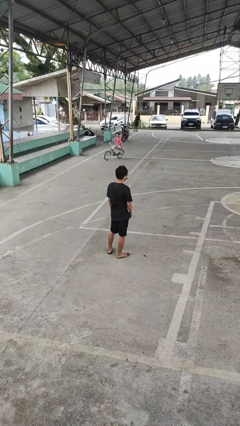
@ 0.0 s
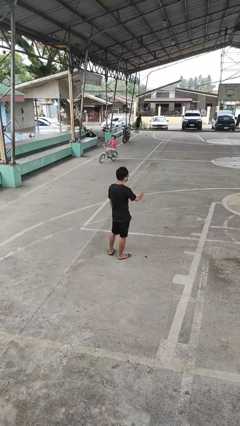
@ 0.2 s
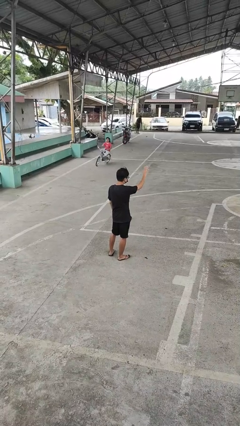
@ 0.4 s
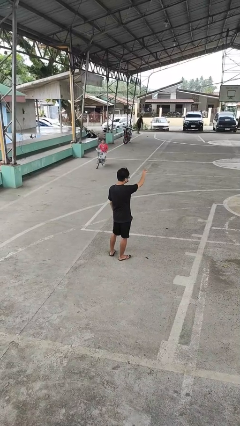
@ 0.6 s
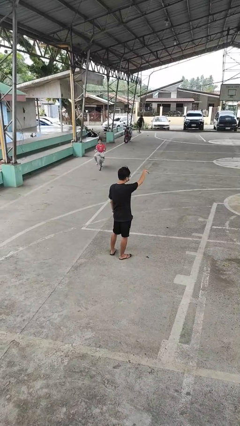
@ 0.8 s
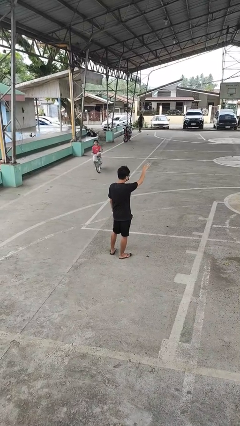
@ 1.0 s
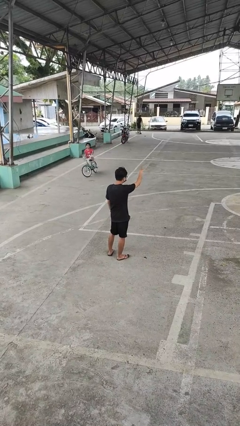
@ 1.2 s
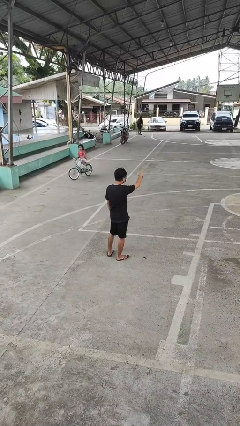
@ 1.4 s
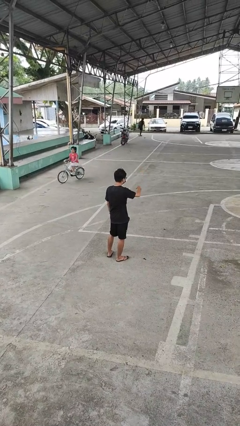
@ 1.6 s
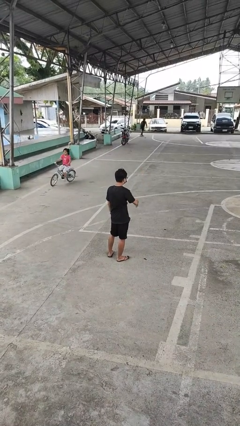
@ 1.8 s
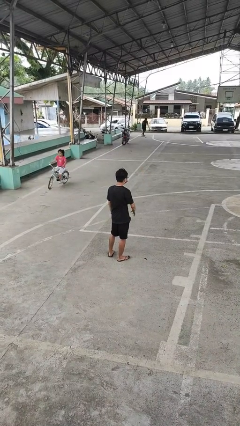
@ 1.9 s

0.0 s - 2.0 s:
person gestures come here

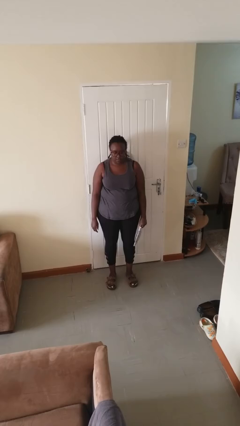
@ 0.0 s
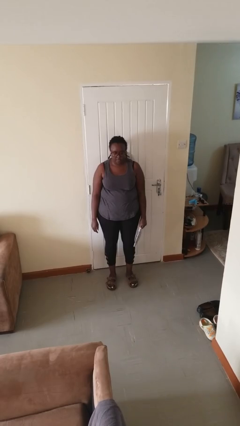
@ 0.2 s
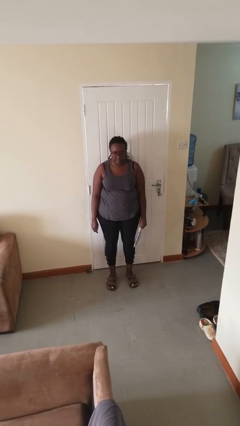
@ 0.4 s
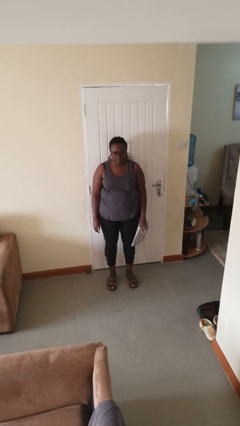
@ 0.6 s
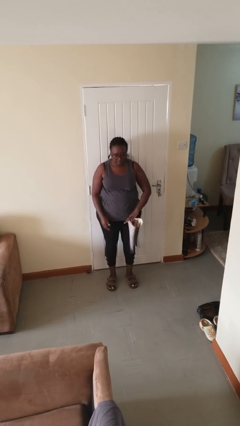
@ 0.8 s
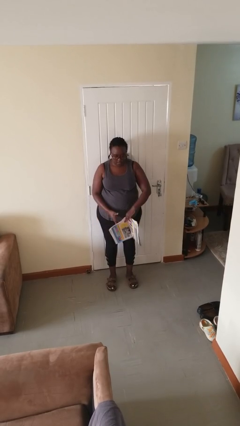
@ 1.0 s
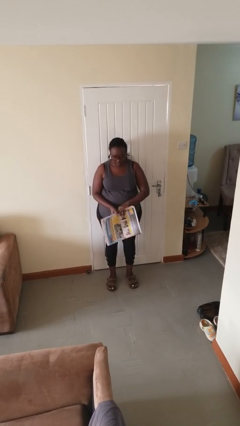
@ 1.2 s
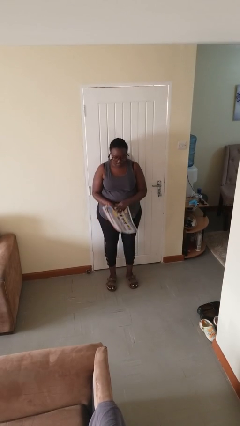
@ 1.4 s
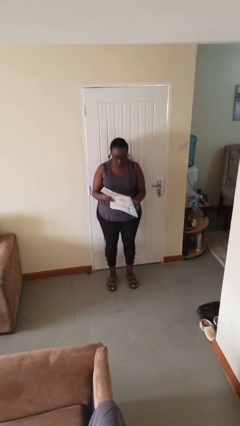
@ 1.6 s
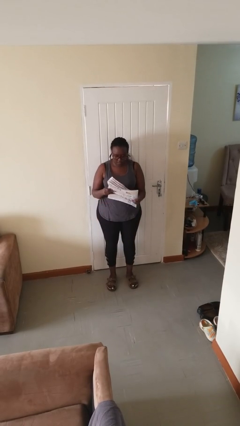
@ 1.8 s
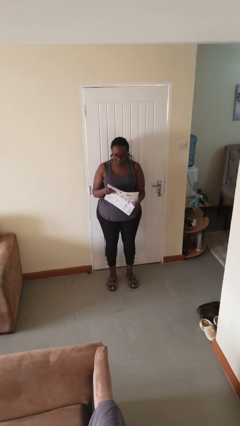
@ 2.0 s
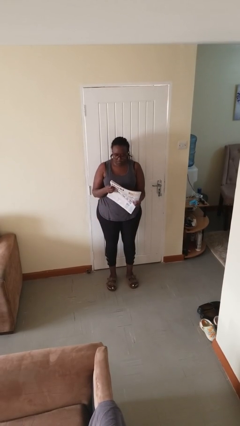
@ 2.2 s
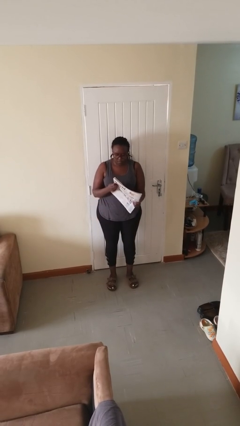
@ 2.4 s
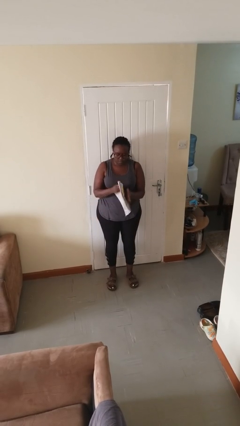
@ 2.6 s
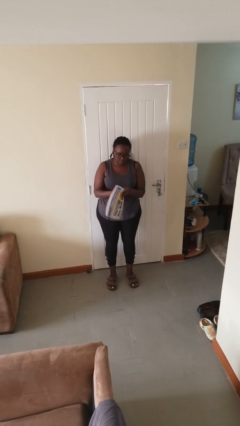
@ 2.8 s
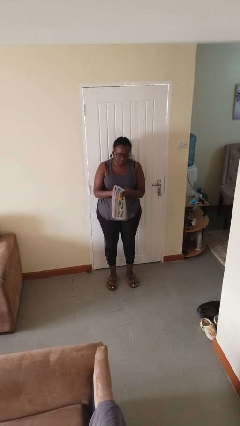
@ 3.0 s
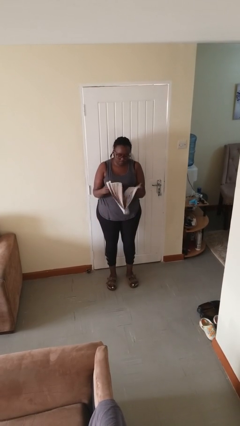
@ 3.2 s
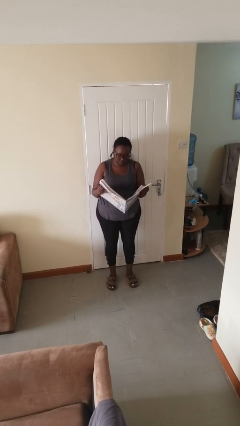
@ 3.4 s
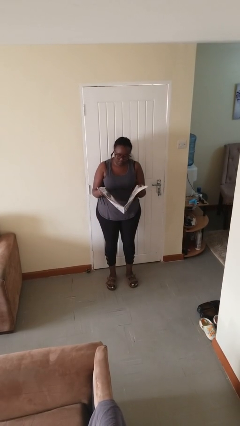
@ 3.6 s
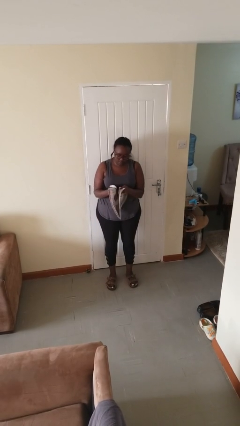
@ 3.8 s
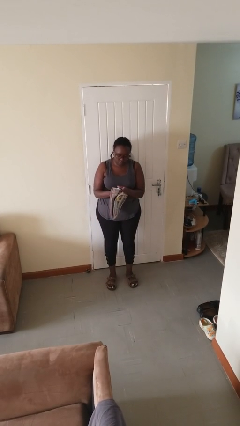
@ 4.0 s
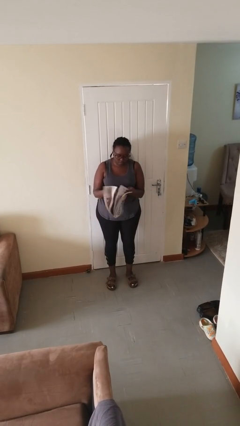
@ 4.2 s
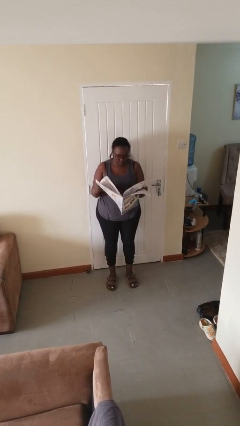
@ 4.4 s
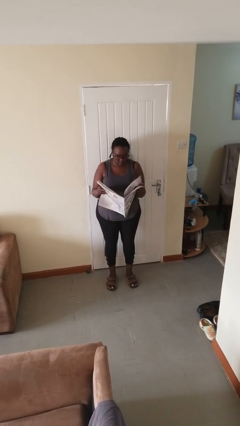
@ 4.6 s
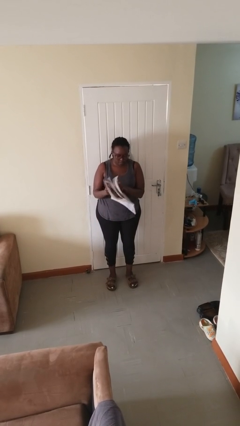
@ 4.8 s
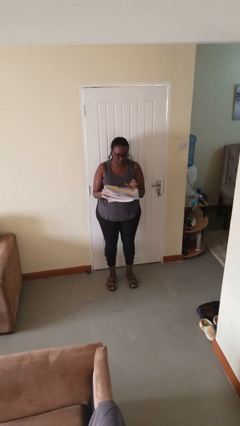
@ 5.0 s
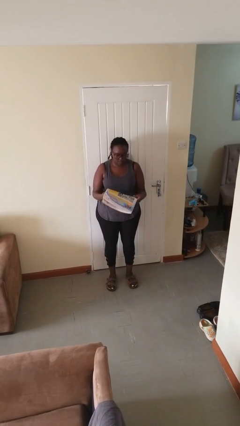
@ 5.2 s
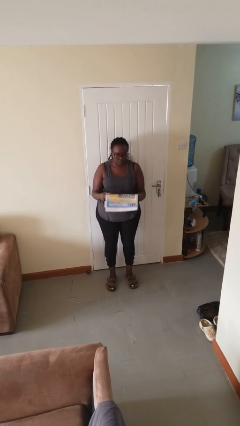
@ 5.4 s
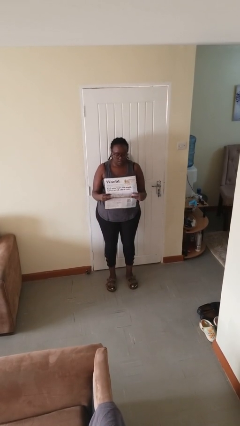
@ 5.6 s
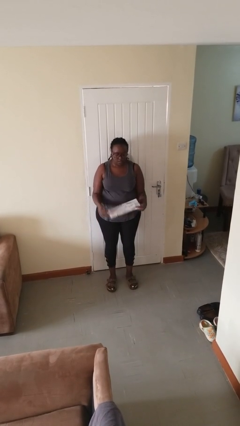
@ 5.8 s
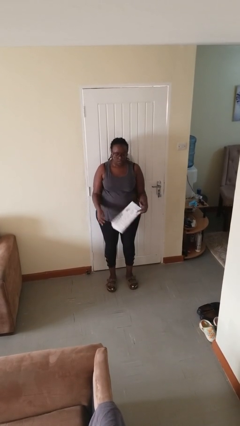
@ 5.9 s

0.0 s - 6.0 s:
person reads newspaper

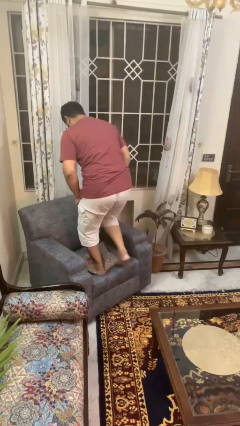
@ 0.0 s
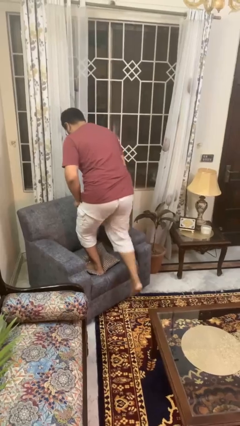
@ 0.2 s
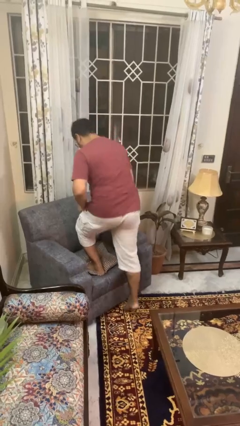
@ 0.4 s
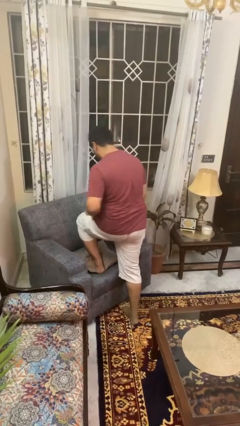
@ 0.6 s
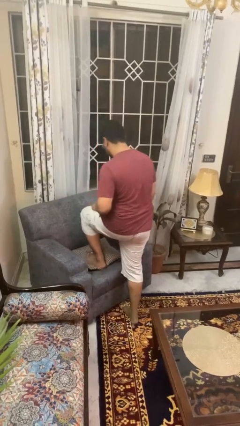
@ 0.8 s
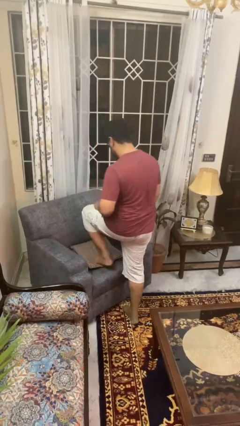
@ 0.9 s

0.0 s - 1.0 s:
person climbs off couch

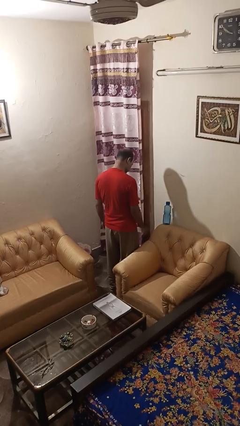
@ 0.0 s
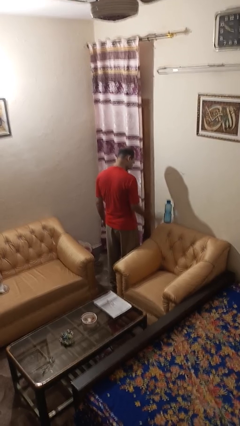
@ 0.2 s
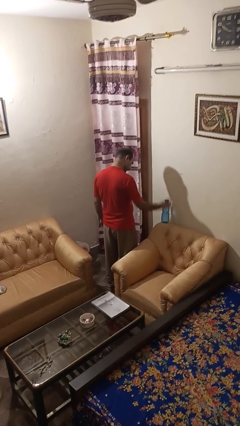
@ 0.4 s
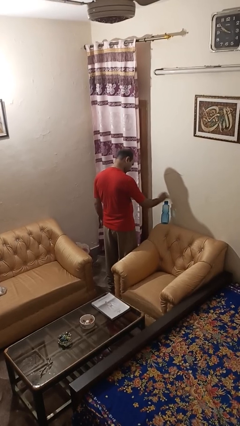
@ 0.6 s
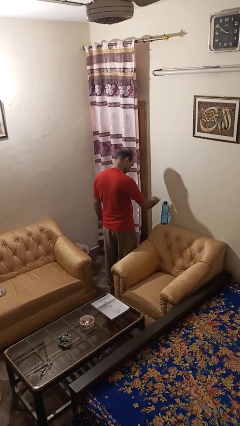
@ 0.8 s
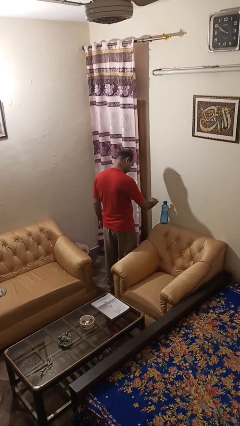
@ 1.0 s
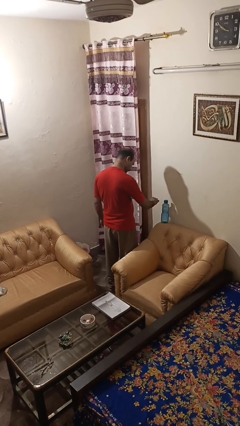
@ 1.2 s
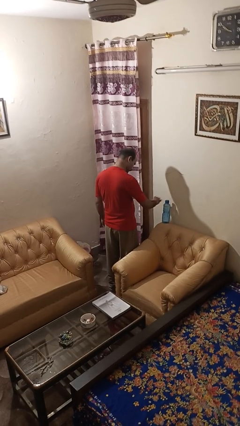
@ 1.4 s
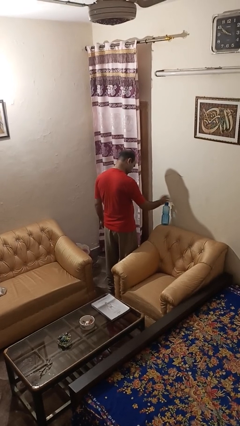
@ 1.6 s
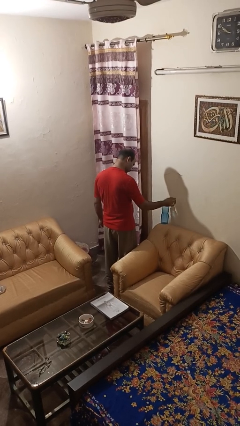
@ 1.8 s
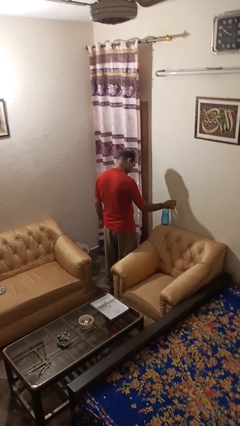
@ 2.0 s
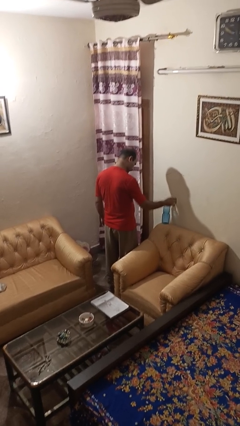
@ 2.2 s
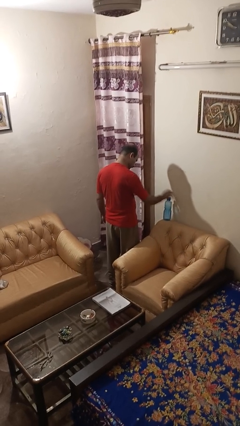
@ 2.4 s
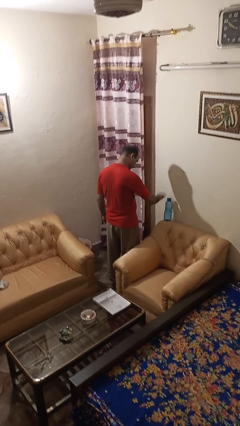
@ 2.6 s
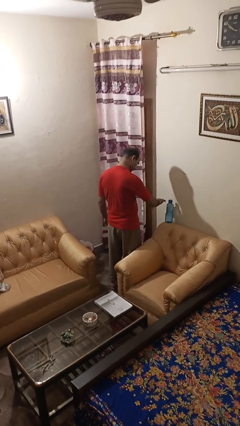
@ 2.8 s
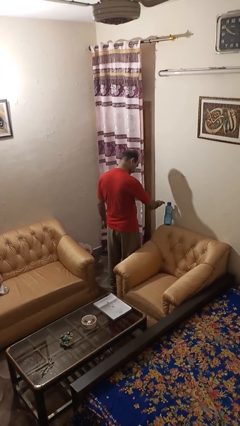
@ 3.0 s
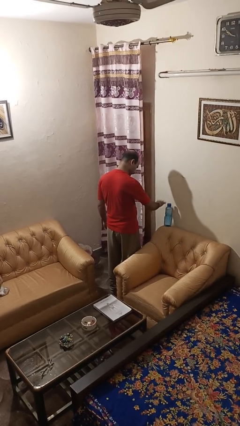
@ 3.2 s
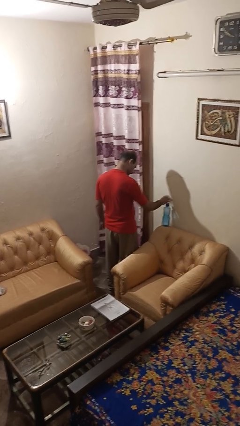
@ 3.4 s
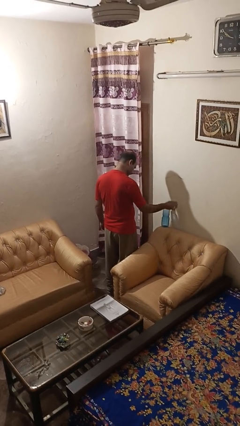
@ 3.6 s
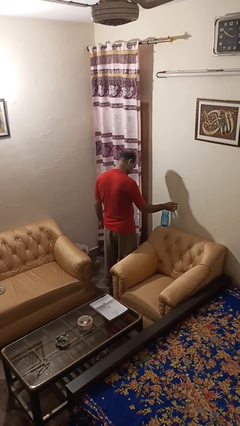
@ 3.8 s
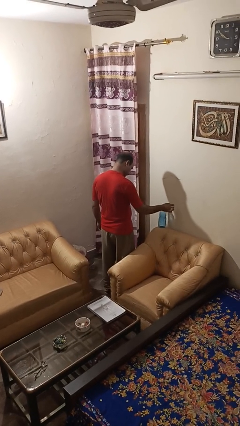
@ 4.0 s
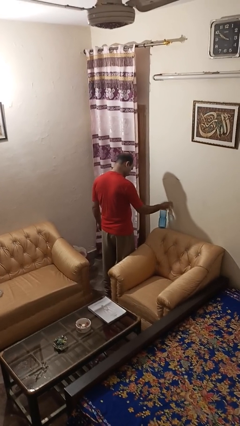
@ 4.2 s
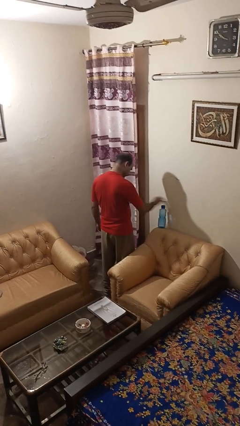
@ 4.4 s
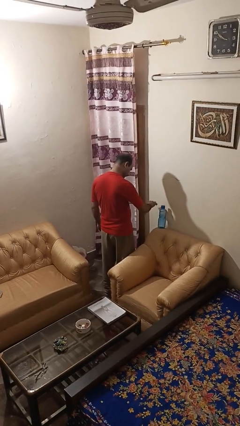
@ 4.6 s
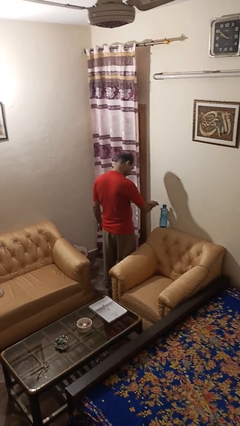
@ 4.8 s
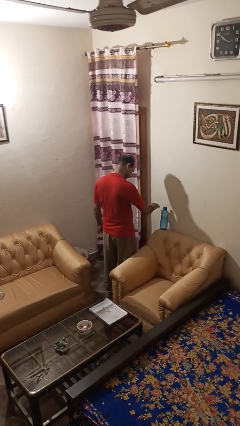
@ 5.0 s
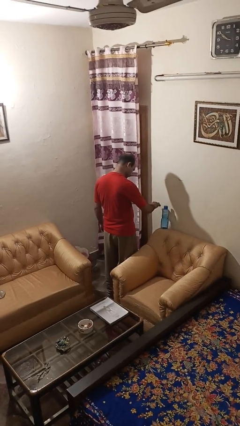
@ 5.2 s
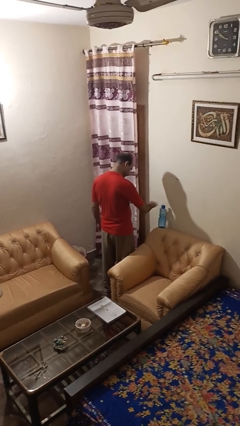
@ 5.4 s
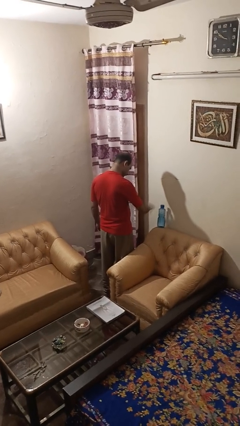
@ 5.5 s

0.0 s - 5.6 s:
person waves hand over object

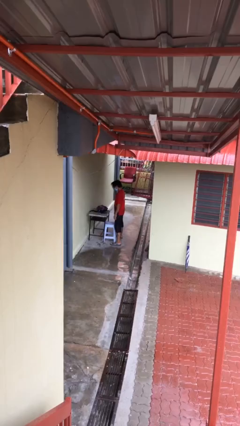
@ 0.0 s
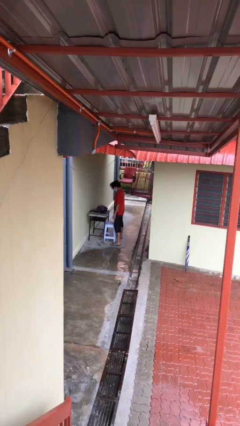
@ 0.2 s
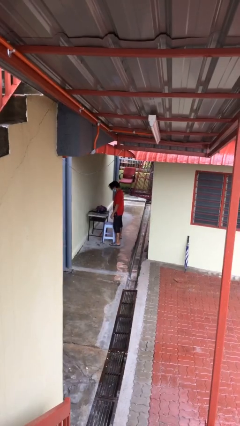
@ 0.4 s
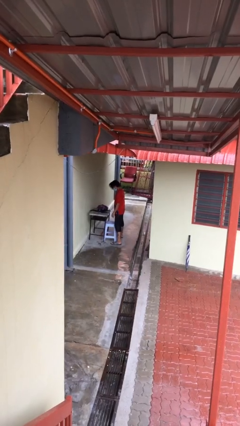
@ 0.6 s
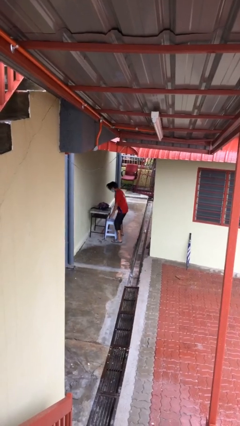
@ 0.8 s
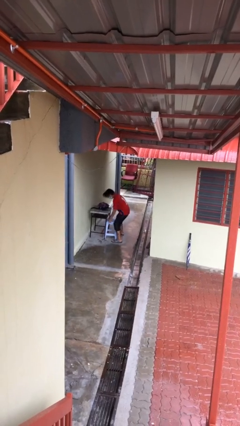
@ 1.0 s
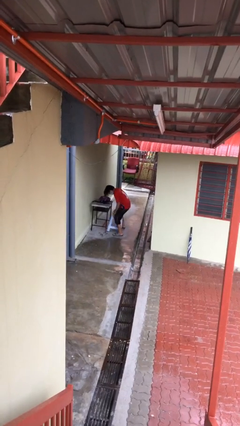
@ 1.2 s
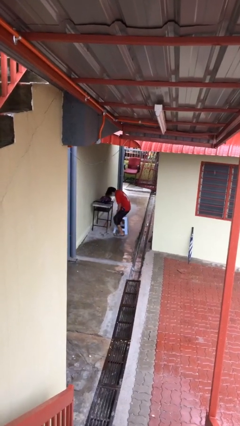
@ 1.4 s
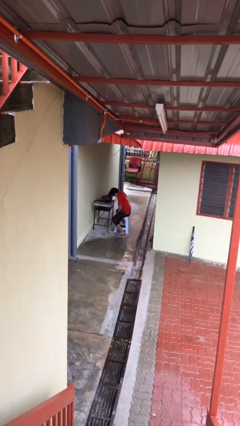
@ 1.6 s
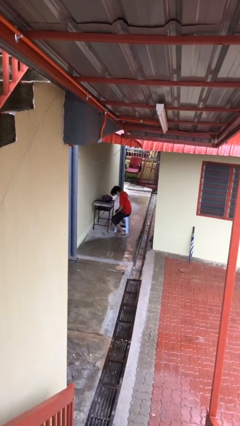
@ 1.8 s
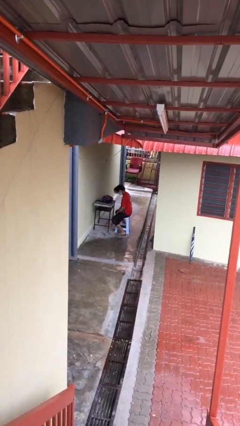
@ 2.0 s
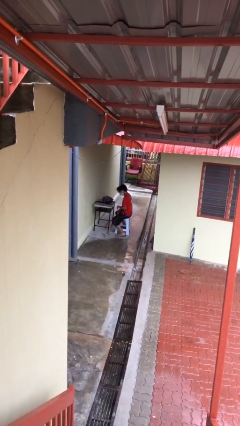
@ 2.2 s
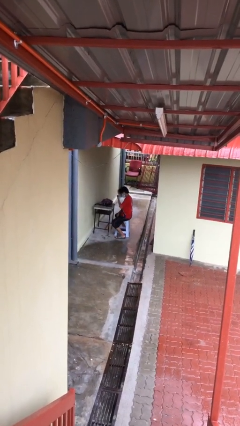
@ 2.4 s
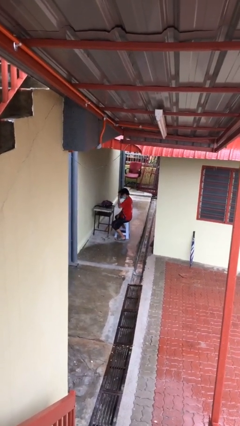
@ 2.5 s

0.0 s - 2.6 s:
person sits down
